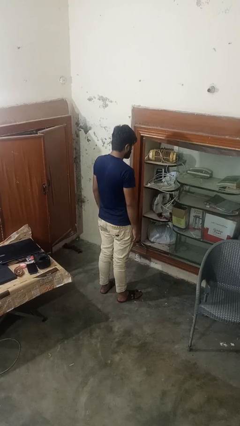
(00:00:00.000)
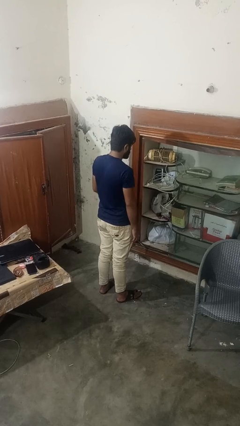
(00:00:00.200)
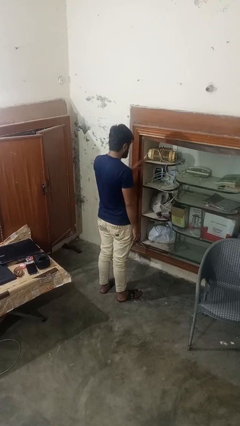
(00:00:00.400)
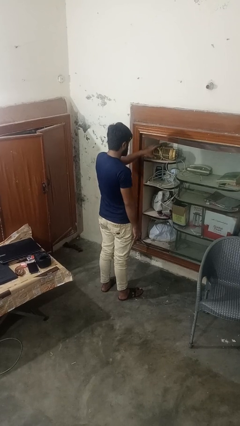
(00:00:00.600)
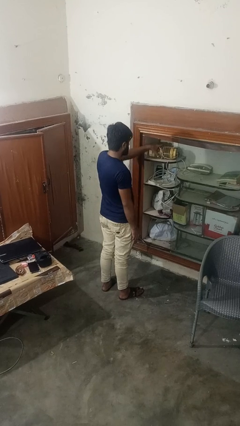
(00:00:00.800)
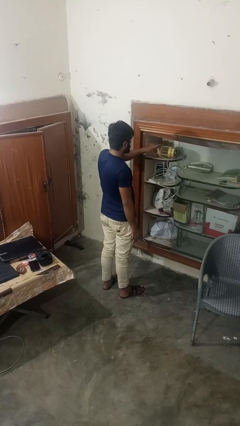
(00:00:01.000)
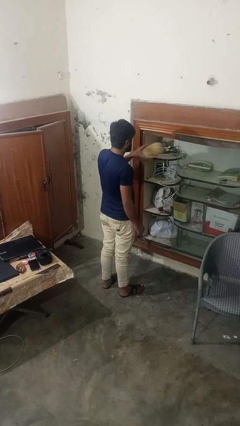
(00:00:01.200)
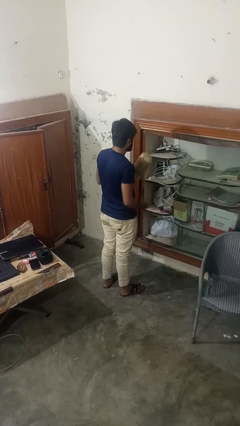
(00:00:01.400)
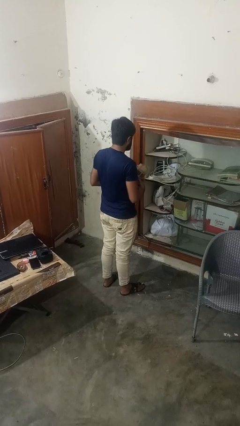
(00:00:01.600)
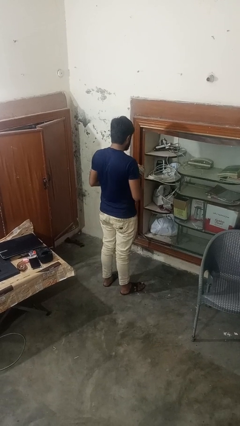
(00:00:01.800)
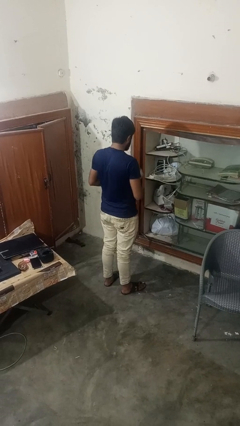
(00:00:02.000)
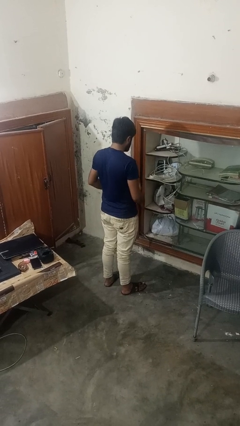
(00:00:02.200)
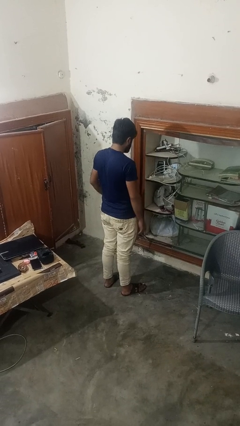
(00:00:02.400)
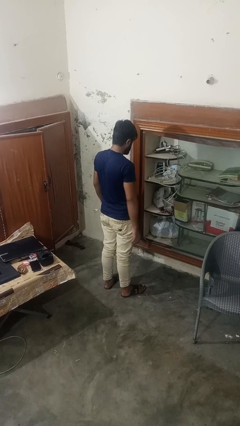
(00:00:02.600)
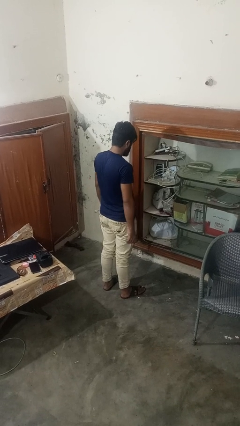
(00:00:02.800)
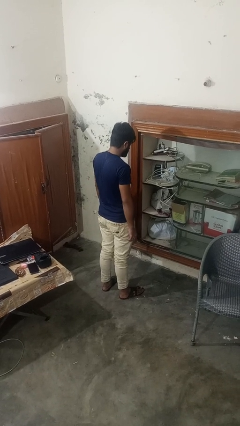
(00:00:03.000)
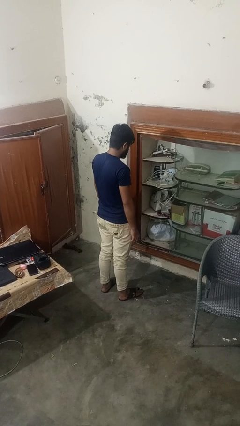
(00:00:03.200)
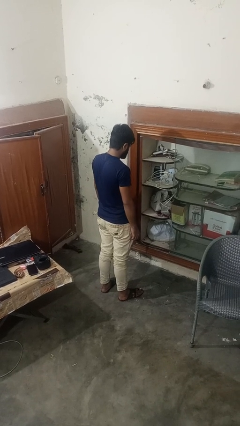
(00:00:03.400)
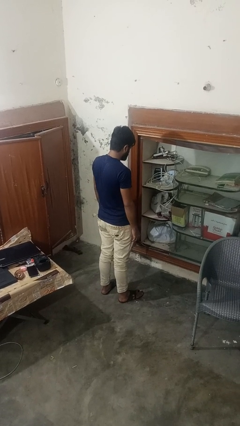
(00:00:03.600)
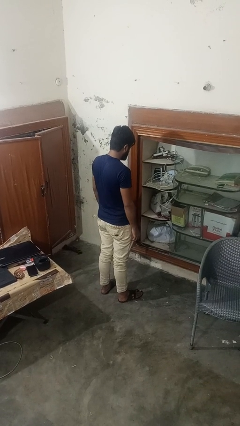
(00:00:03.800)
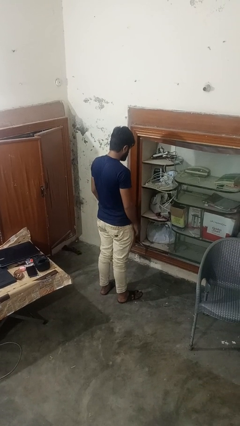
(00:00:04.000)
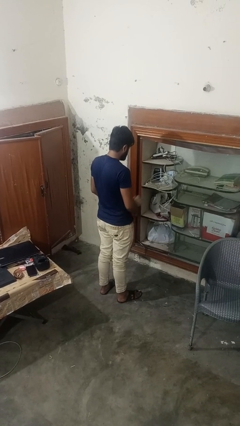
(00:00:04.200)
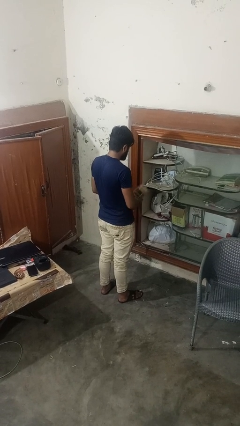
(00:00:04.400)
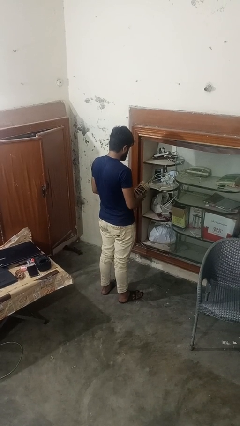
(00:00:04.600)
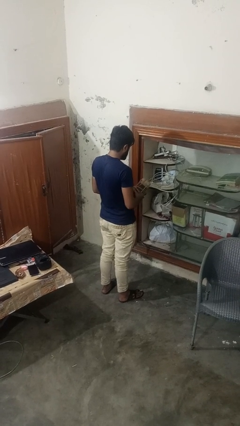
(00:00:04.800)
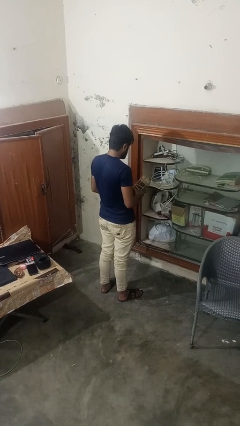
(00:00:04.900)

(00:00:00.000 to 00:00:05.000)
person picks up object from countertop

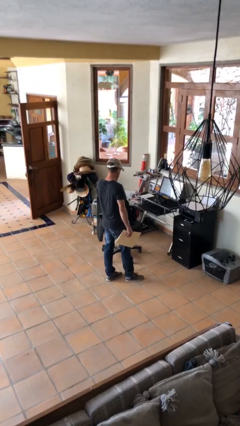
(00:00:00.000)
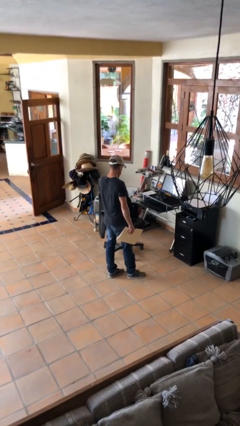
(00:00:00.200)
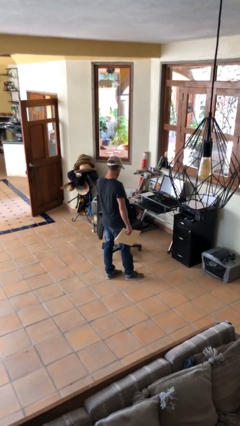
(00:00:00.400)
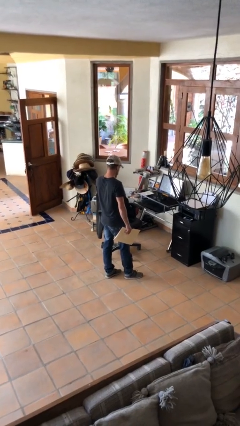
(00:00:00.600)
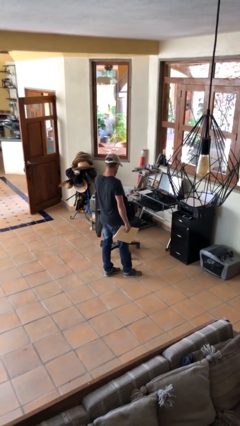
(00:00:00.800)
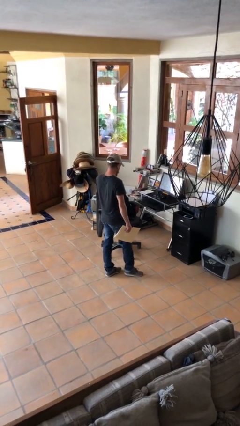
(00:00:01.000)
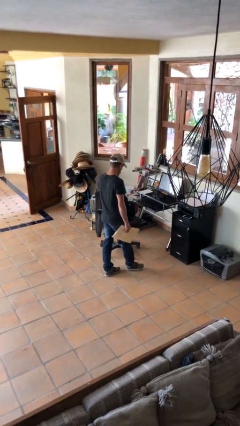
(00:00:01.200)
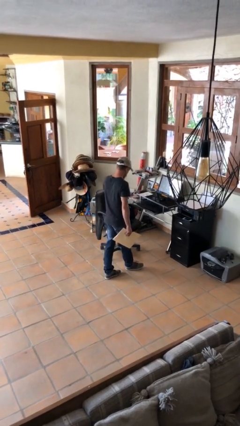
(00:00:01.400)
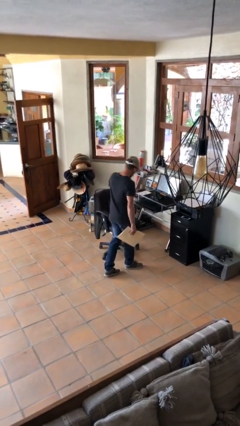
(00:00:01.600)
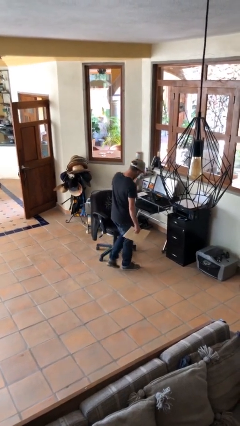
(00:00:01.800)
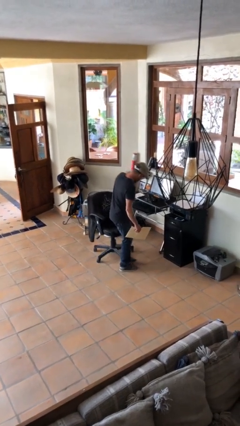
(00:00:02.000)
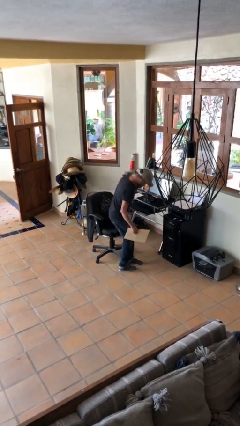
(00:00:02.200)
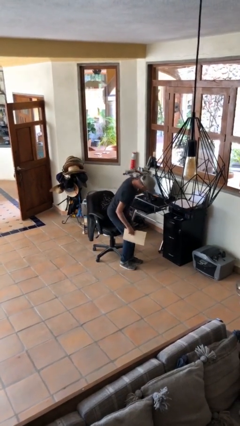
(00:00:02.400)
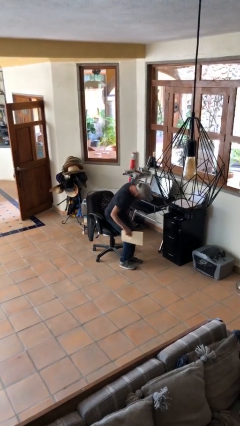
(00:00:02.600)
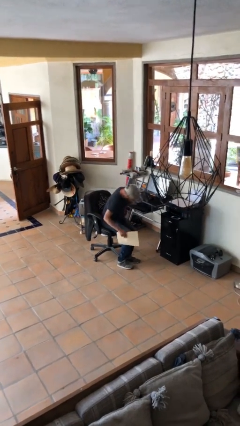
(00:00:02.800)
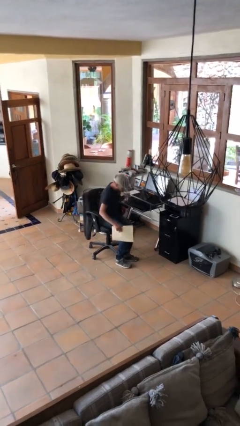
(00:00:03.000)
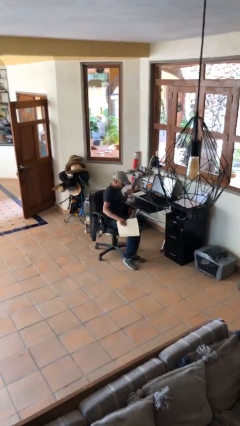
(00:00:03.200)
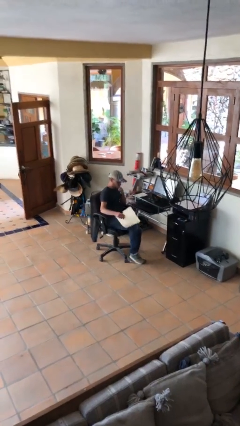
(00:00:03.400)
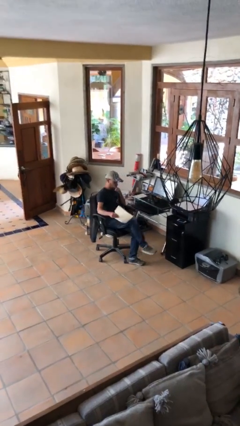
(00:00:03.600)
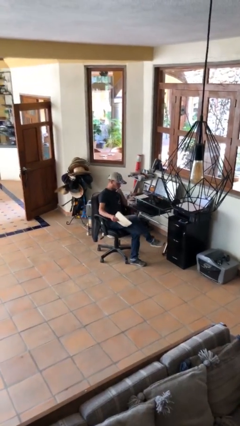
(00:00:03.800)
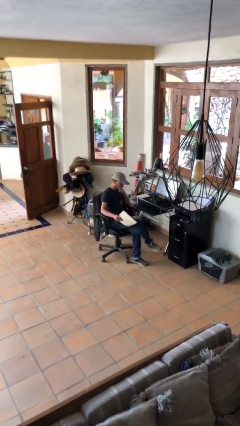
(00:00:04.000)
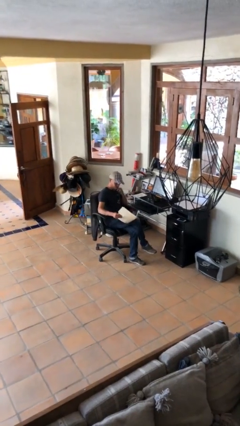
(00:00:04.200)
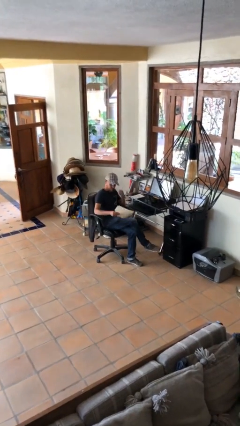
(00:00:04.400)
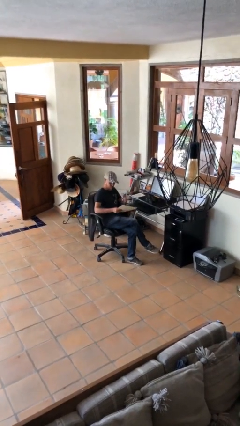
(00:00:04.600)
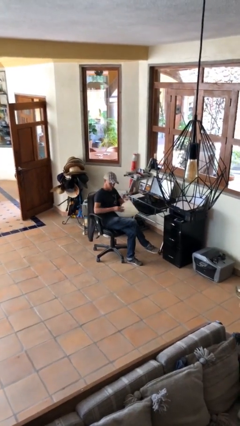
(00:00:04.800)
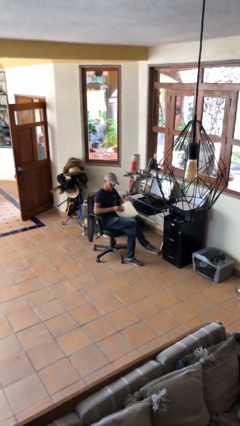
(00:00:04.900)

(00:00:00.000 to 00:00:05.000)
person sits down

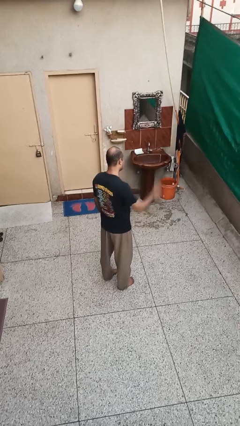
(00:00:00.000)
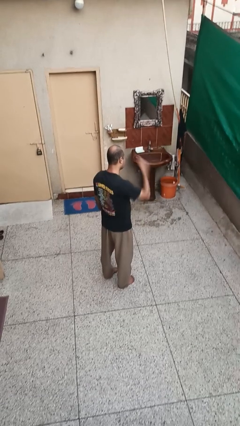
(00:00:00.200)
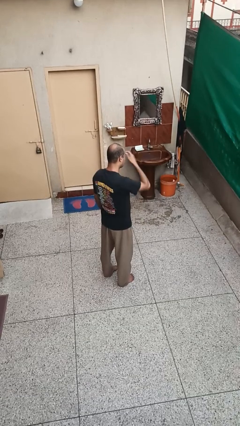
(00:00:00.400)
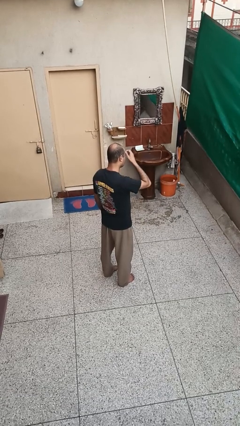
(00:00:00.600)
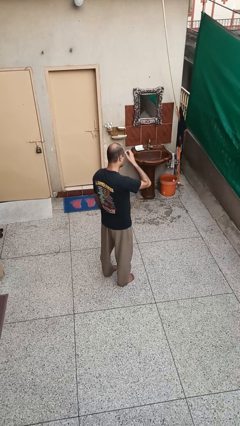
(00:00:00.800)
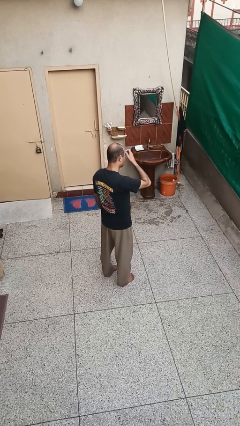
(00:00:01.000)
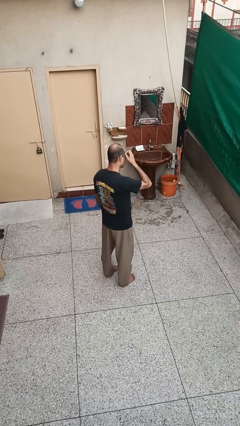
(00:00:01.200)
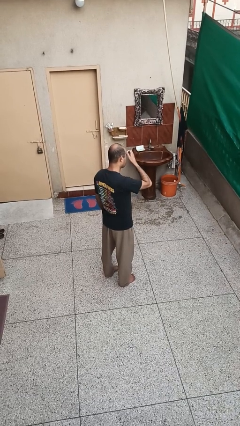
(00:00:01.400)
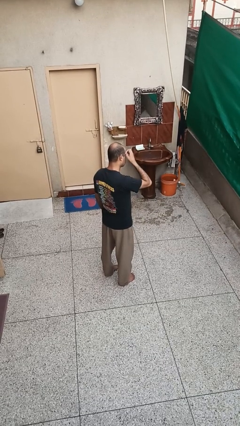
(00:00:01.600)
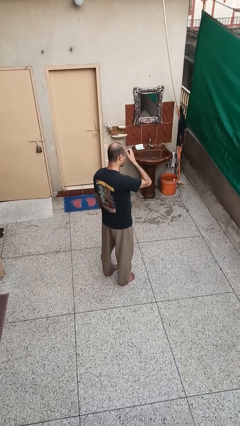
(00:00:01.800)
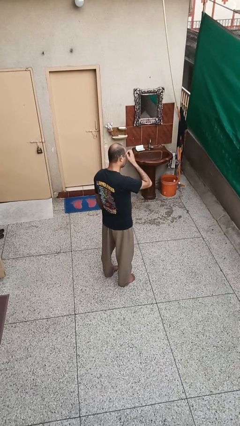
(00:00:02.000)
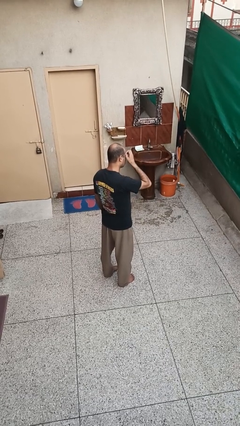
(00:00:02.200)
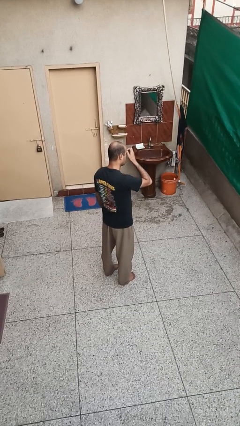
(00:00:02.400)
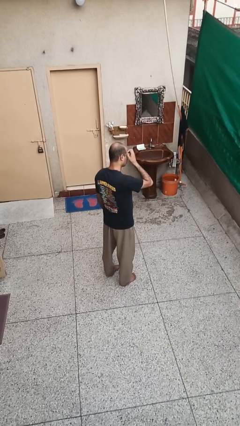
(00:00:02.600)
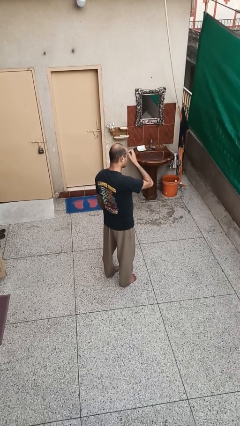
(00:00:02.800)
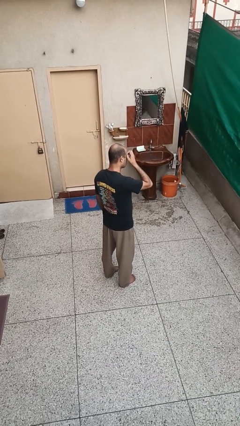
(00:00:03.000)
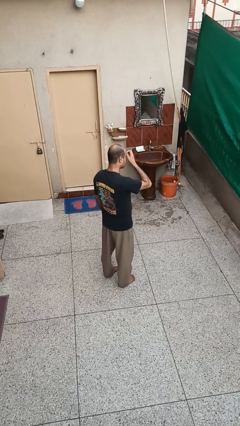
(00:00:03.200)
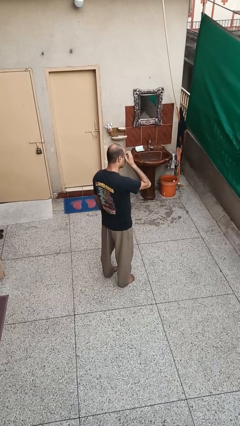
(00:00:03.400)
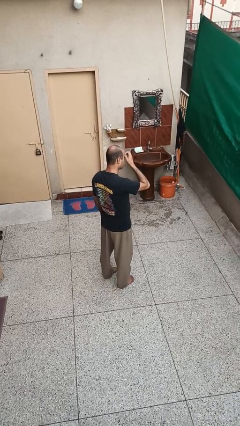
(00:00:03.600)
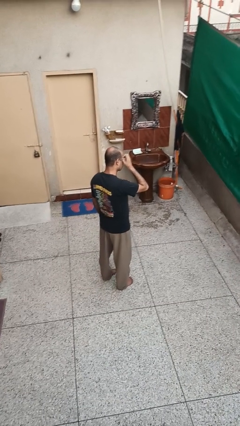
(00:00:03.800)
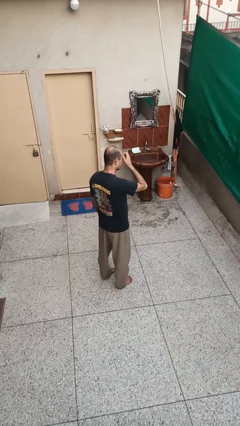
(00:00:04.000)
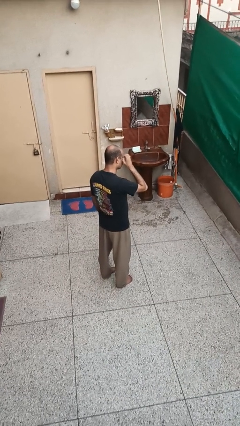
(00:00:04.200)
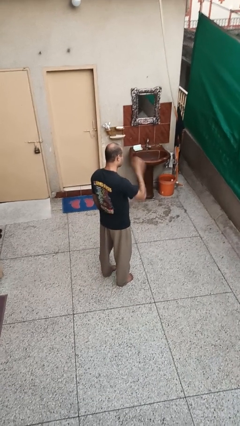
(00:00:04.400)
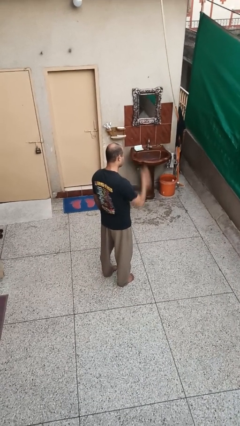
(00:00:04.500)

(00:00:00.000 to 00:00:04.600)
person scratches face

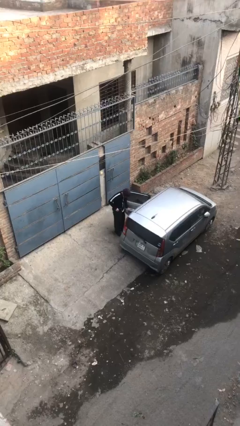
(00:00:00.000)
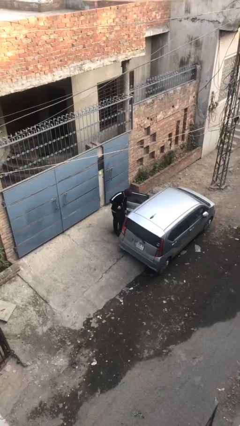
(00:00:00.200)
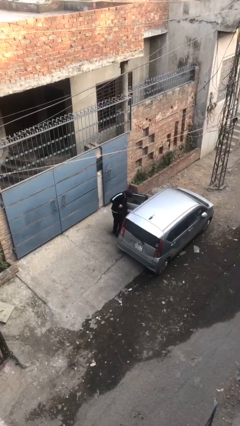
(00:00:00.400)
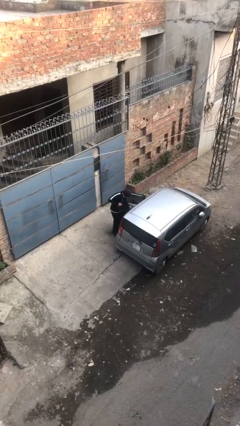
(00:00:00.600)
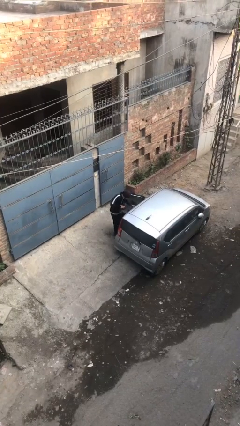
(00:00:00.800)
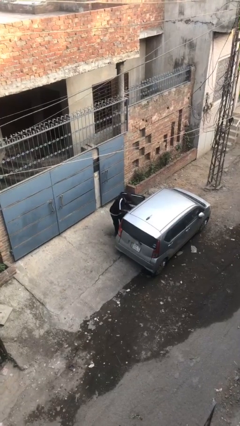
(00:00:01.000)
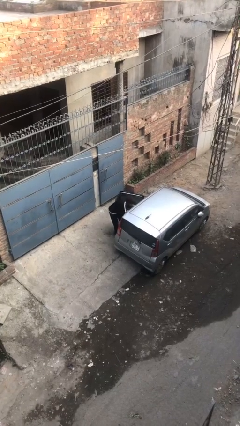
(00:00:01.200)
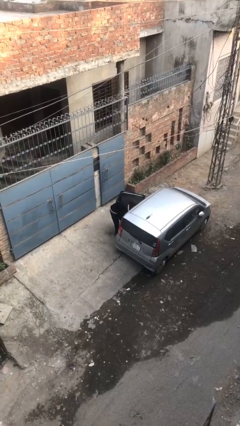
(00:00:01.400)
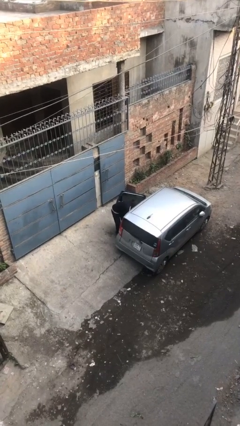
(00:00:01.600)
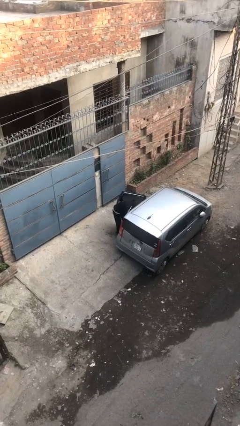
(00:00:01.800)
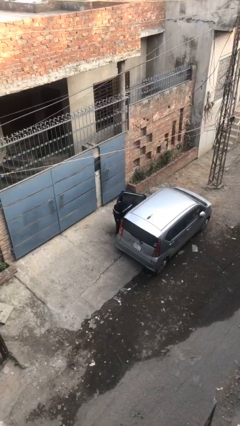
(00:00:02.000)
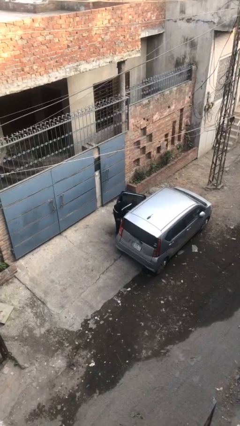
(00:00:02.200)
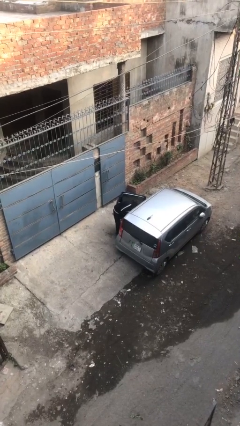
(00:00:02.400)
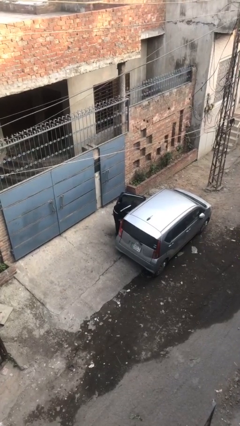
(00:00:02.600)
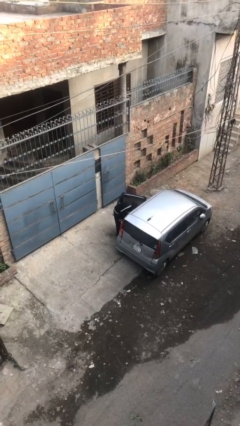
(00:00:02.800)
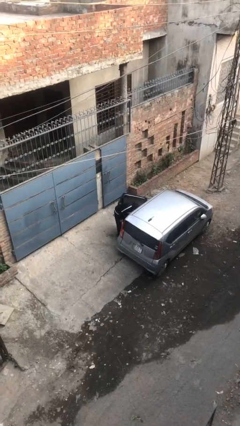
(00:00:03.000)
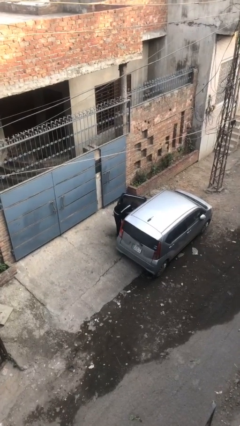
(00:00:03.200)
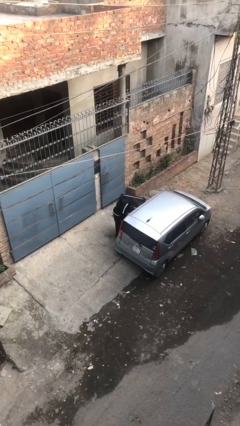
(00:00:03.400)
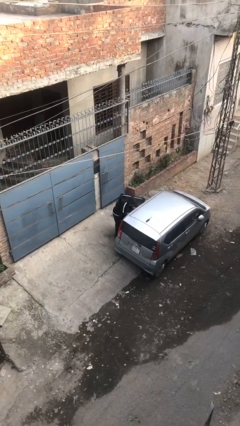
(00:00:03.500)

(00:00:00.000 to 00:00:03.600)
person loads car
